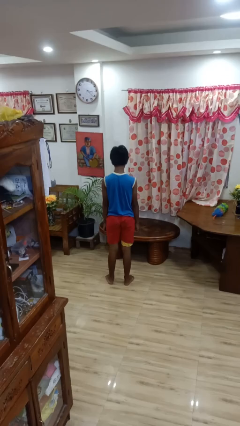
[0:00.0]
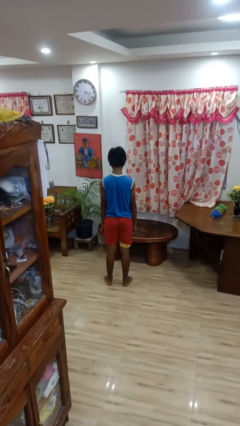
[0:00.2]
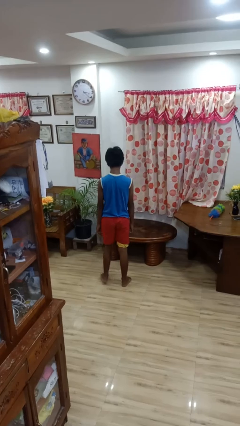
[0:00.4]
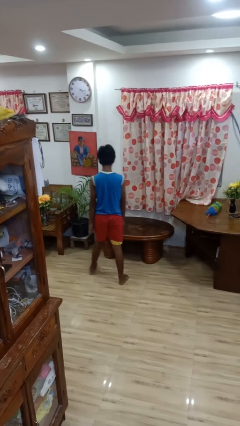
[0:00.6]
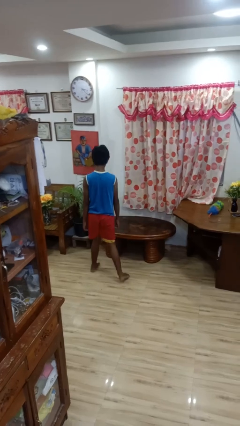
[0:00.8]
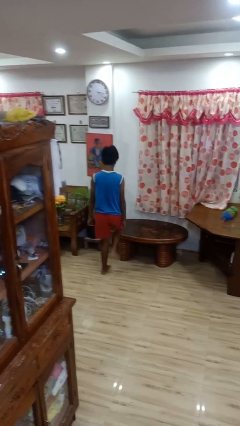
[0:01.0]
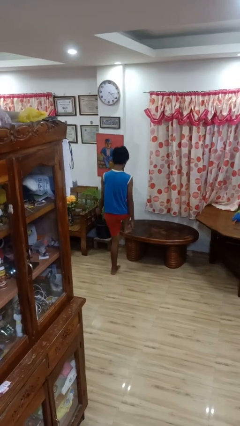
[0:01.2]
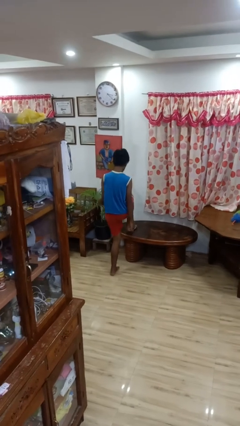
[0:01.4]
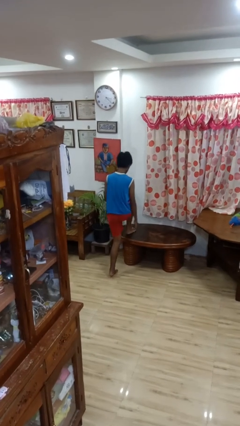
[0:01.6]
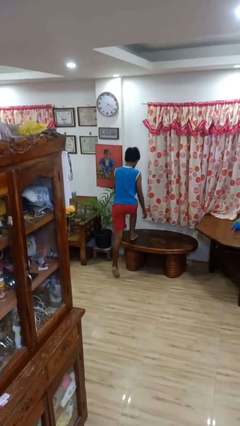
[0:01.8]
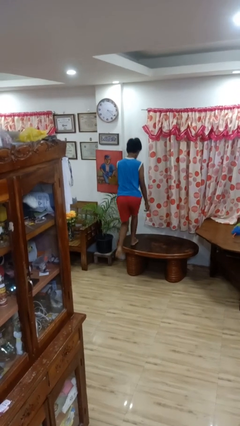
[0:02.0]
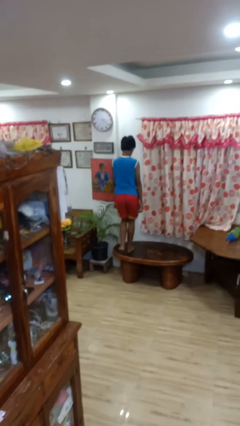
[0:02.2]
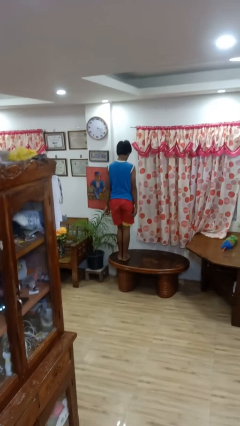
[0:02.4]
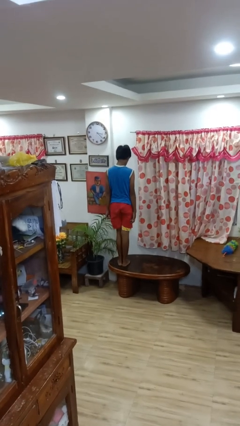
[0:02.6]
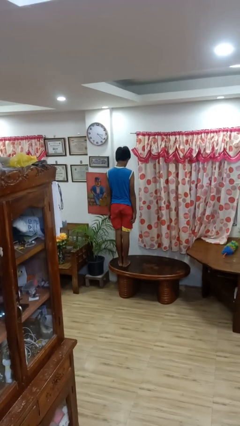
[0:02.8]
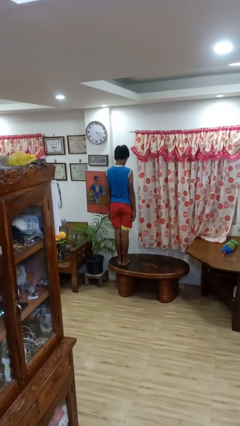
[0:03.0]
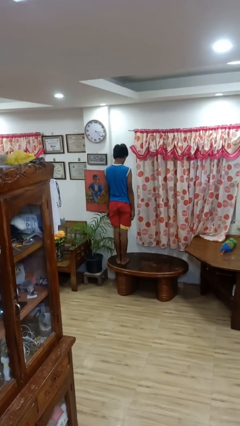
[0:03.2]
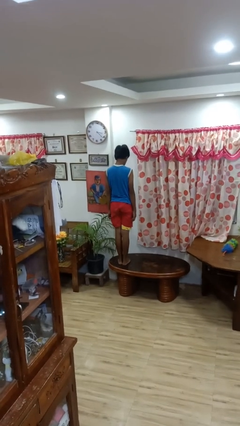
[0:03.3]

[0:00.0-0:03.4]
person climbs on table

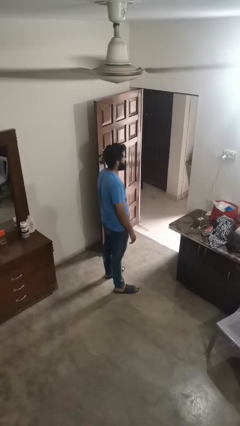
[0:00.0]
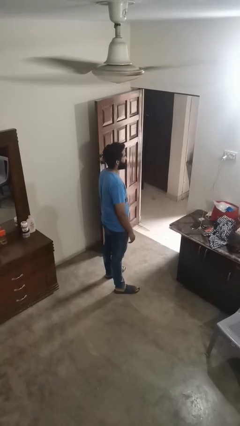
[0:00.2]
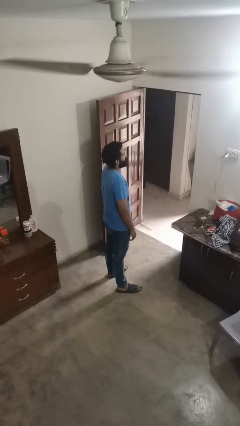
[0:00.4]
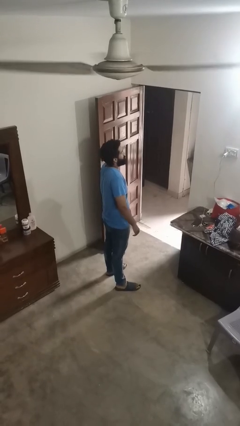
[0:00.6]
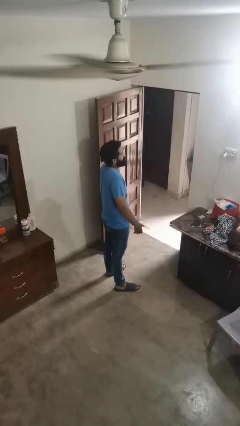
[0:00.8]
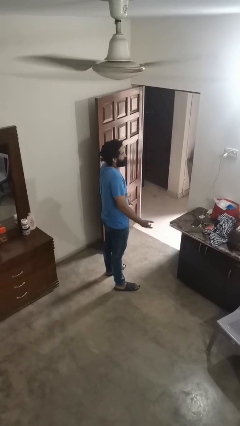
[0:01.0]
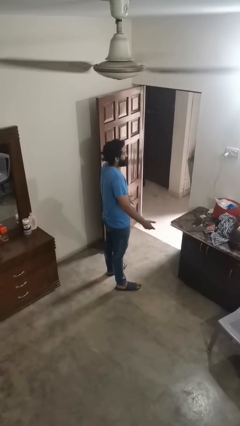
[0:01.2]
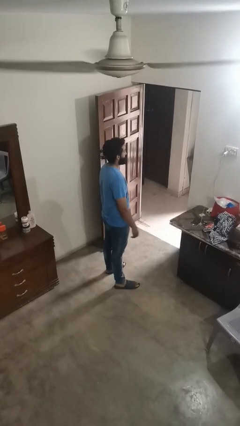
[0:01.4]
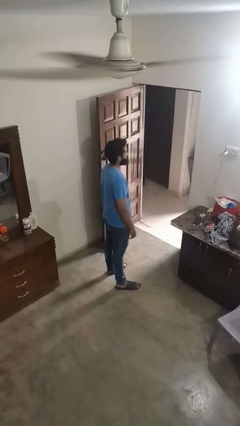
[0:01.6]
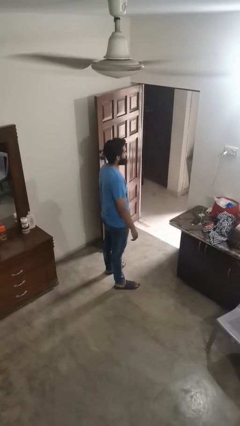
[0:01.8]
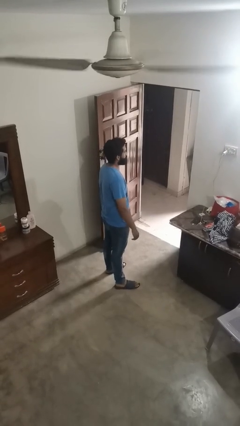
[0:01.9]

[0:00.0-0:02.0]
person shrugs

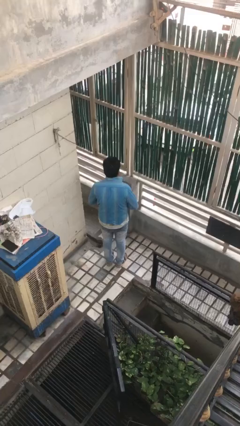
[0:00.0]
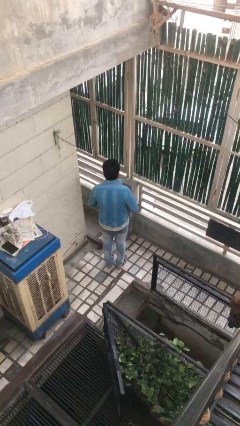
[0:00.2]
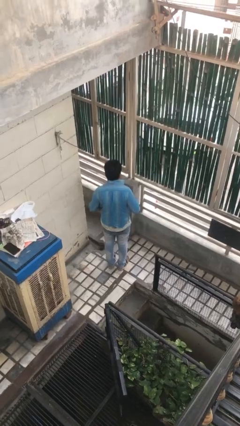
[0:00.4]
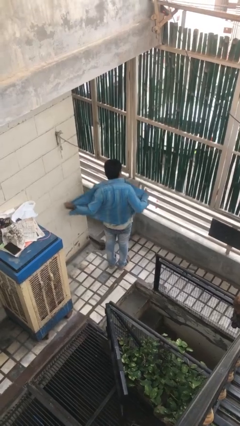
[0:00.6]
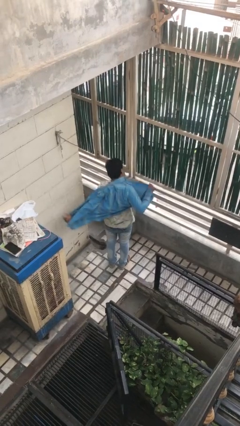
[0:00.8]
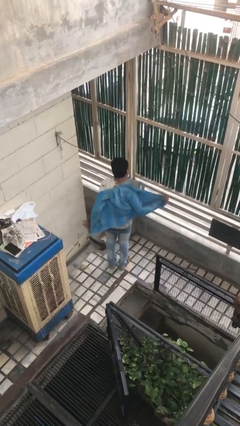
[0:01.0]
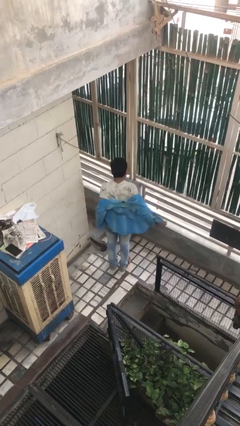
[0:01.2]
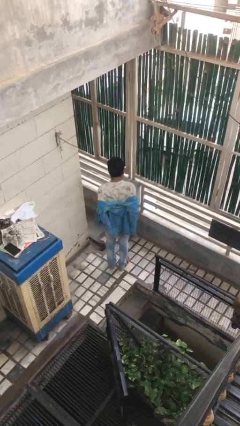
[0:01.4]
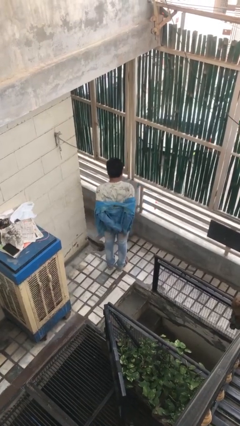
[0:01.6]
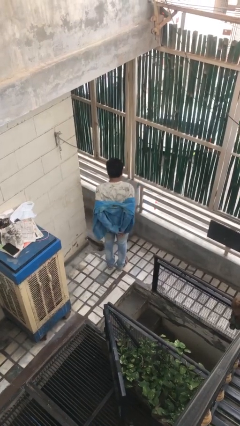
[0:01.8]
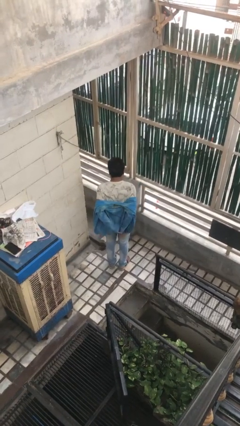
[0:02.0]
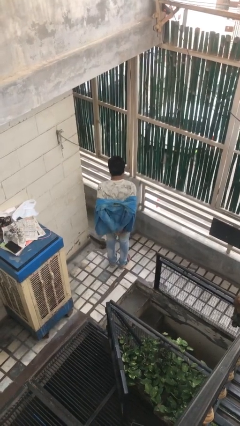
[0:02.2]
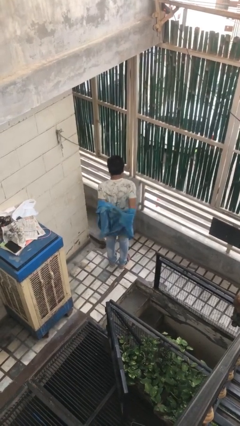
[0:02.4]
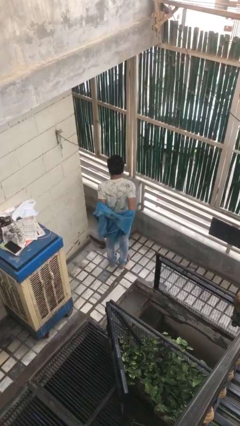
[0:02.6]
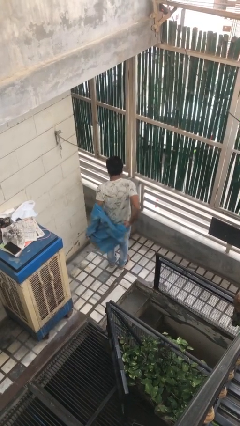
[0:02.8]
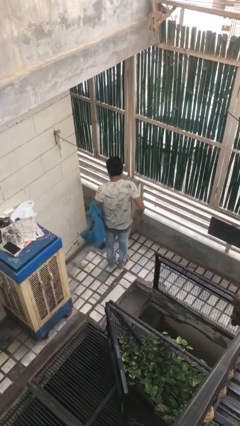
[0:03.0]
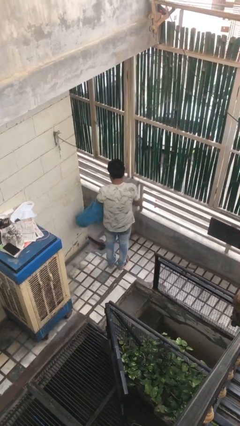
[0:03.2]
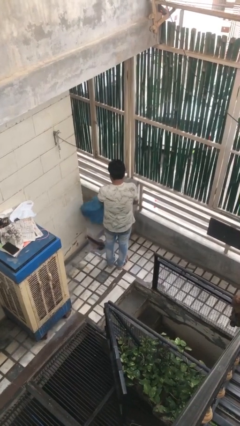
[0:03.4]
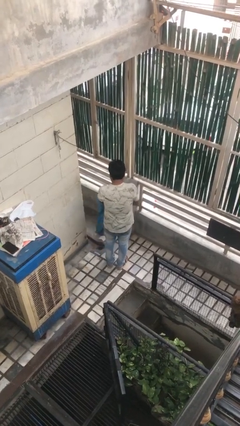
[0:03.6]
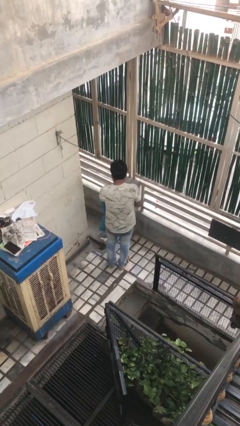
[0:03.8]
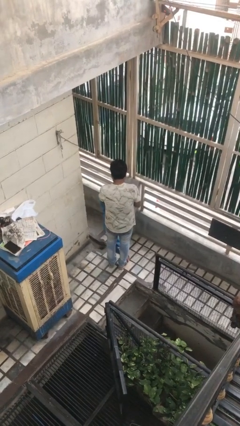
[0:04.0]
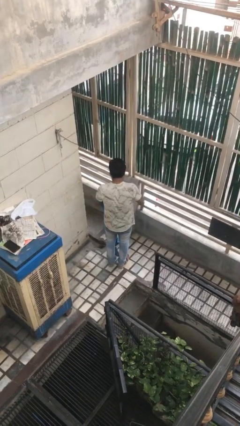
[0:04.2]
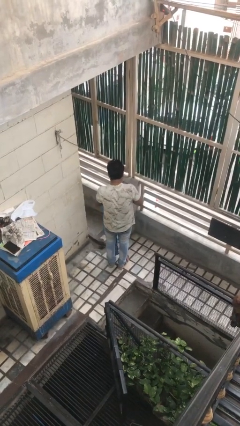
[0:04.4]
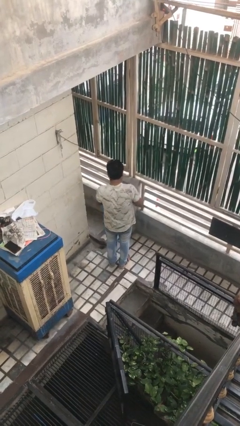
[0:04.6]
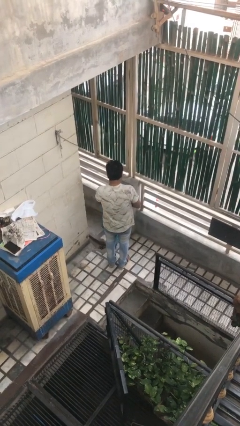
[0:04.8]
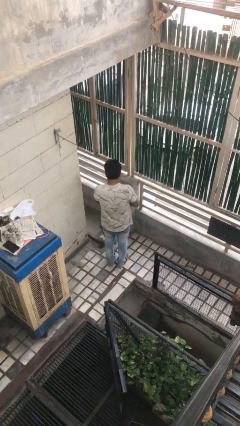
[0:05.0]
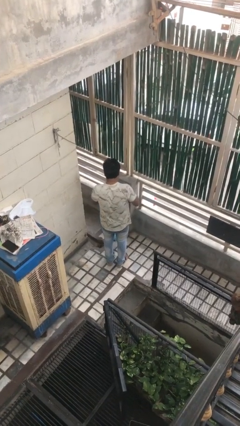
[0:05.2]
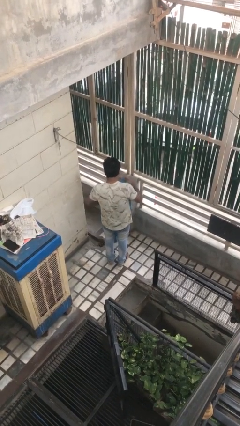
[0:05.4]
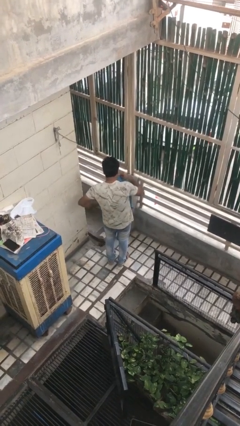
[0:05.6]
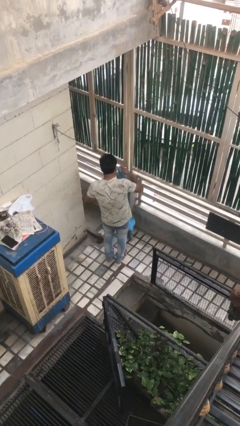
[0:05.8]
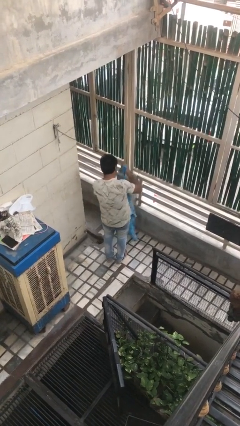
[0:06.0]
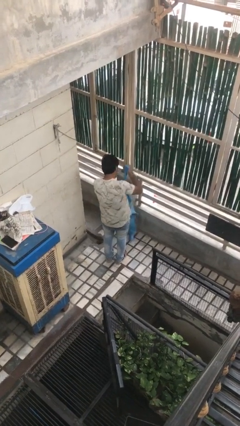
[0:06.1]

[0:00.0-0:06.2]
person takes off shirt

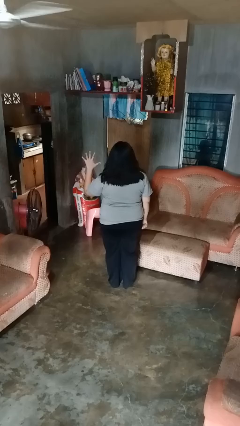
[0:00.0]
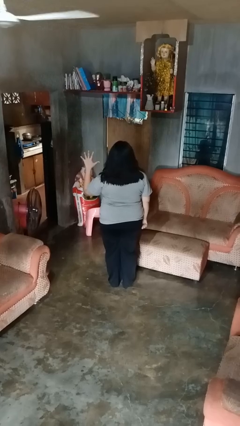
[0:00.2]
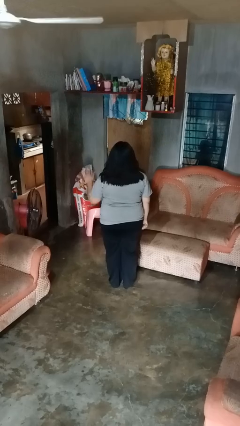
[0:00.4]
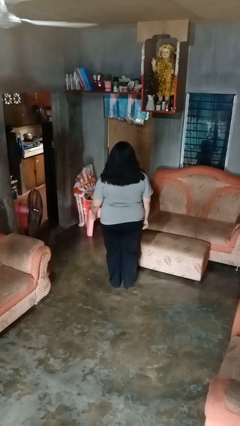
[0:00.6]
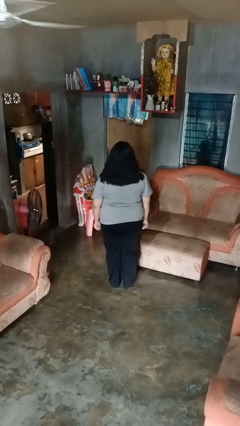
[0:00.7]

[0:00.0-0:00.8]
person gestures number five

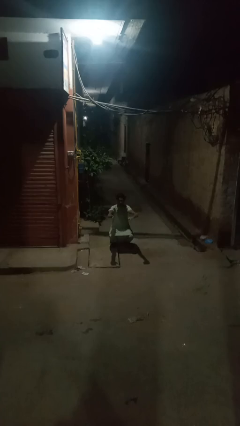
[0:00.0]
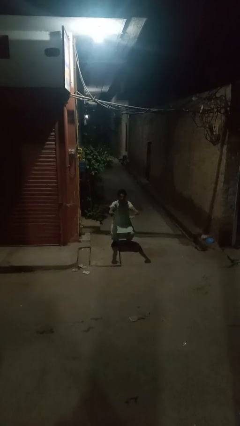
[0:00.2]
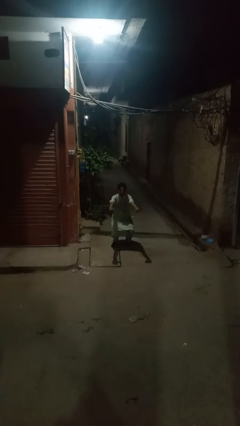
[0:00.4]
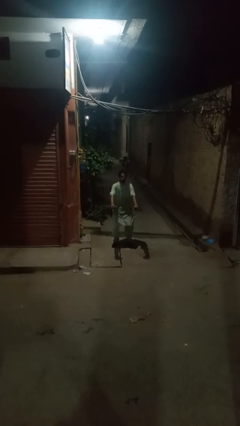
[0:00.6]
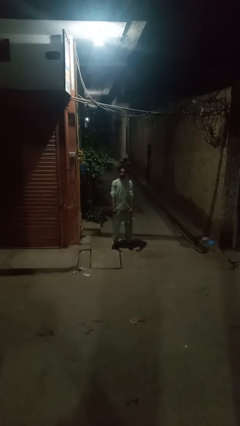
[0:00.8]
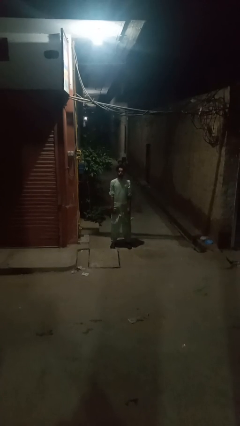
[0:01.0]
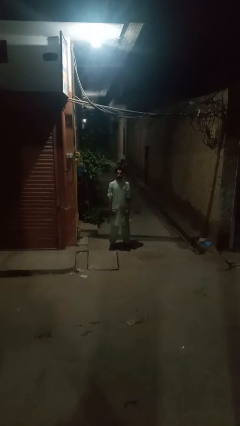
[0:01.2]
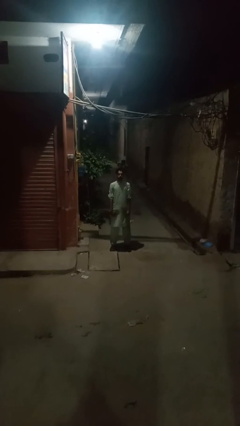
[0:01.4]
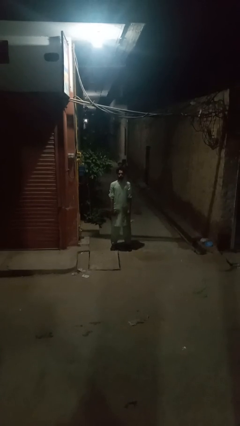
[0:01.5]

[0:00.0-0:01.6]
person stands up

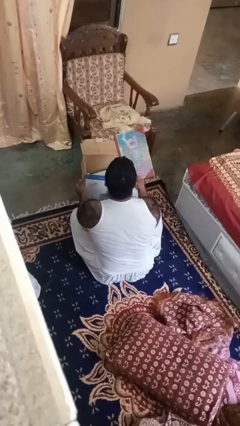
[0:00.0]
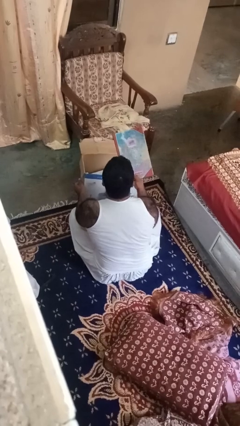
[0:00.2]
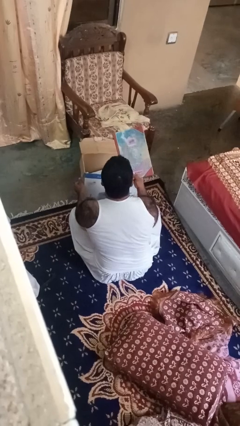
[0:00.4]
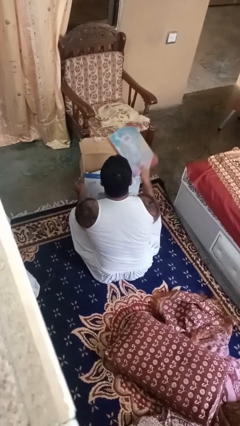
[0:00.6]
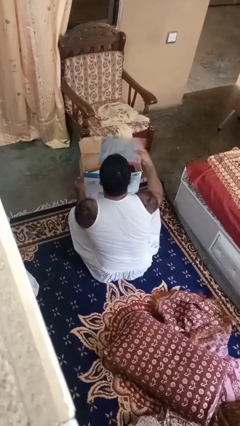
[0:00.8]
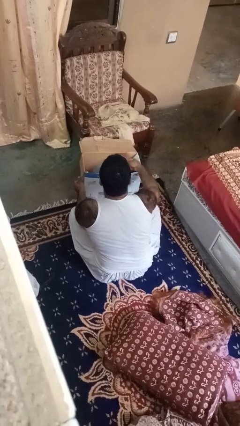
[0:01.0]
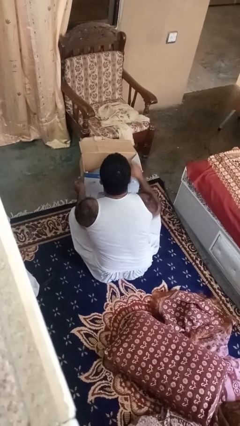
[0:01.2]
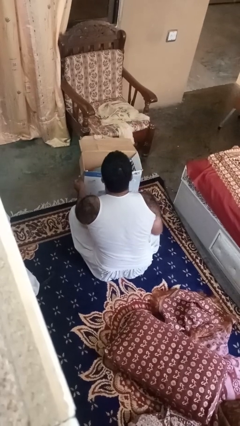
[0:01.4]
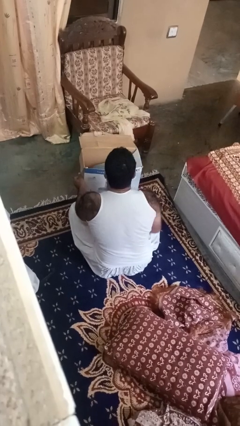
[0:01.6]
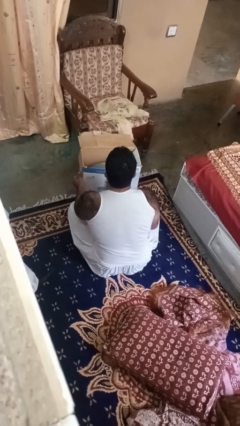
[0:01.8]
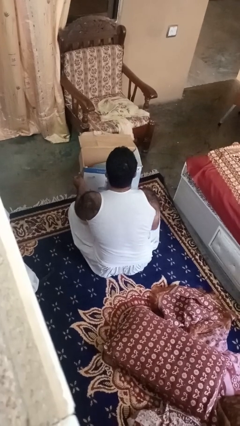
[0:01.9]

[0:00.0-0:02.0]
person puts object into box

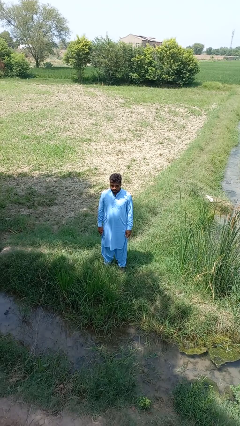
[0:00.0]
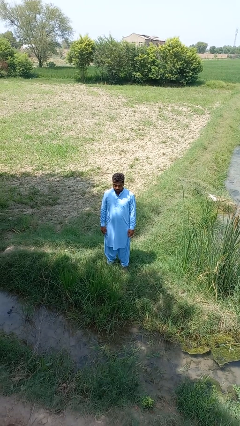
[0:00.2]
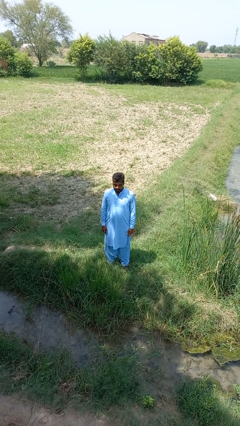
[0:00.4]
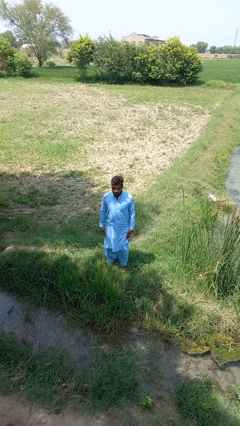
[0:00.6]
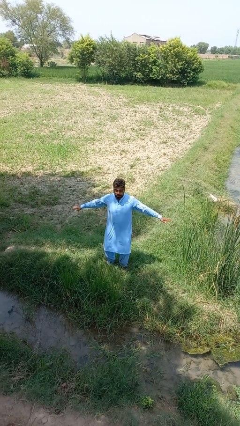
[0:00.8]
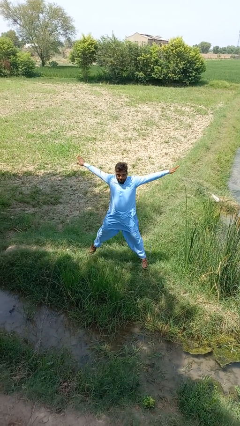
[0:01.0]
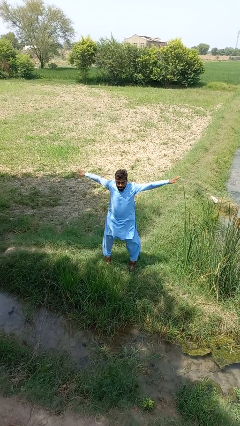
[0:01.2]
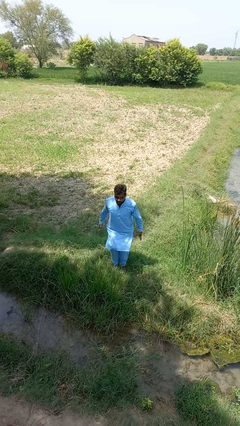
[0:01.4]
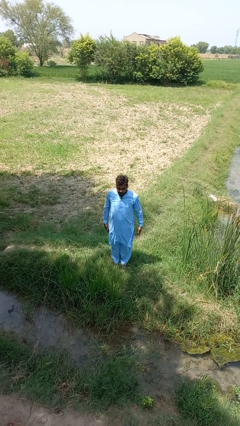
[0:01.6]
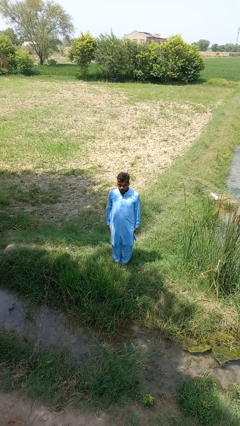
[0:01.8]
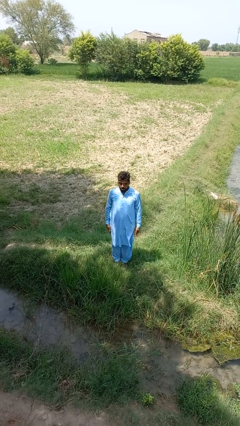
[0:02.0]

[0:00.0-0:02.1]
person exercises with jumping jacks
